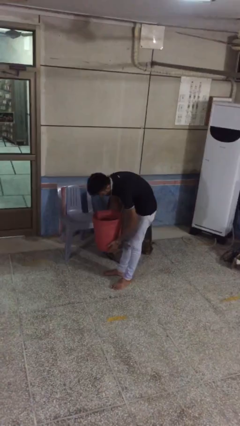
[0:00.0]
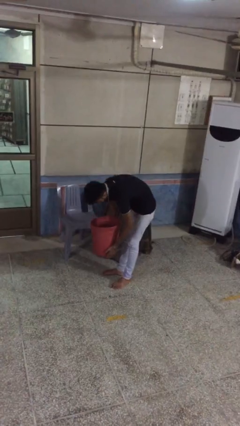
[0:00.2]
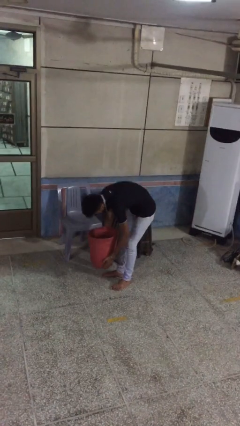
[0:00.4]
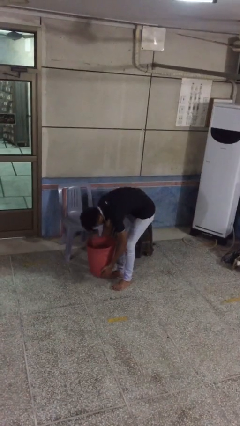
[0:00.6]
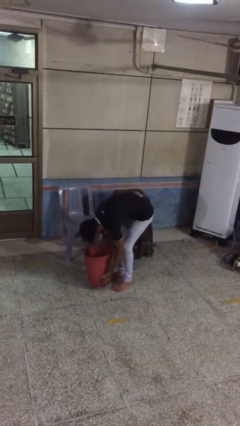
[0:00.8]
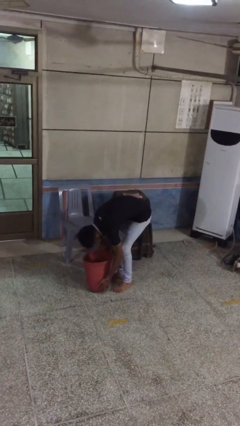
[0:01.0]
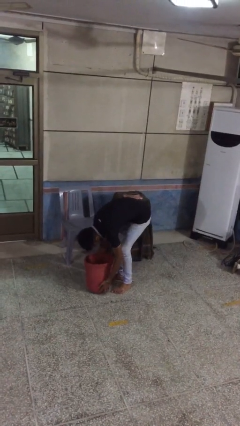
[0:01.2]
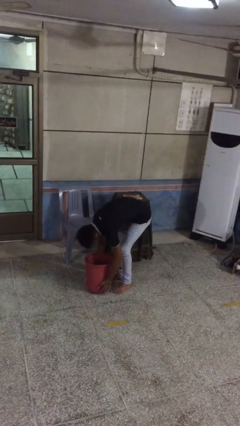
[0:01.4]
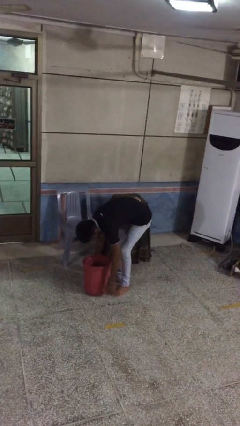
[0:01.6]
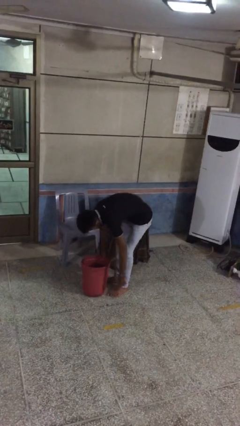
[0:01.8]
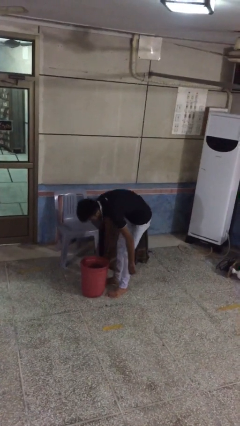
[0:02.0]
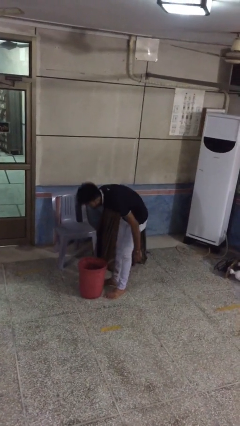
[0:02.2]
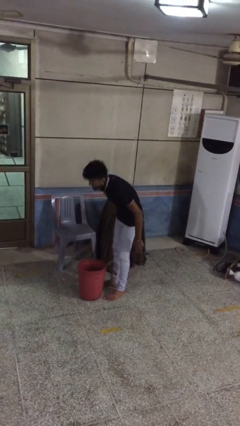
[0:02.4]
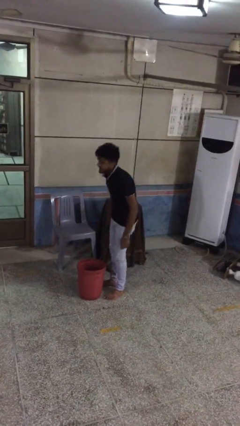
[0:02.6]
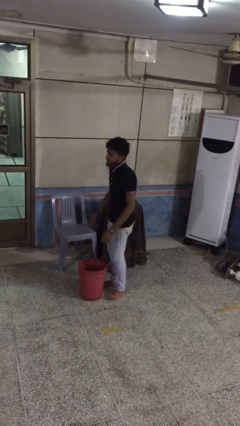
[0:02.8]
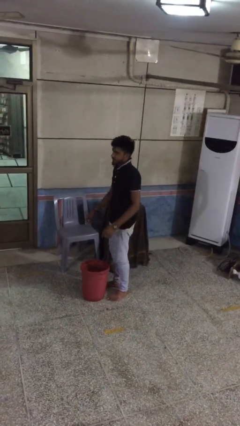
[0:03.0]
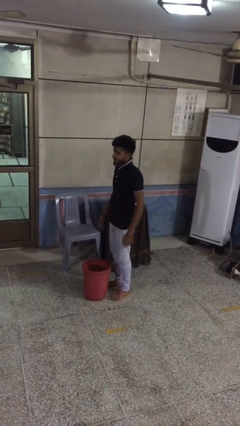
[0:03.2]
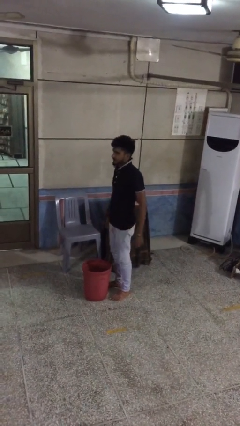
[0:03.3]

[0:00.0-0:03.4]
person puts down object on floor

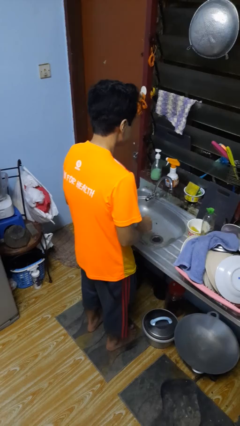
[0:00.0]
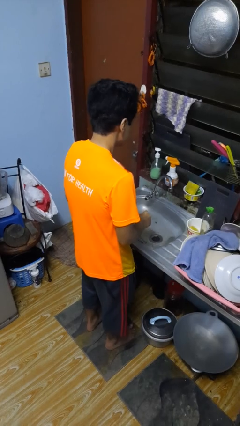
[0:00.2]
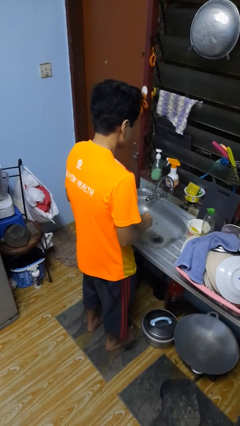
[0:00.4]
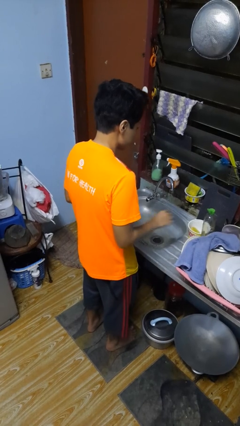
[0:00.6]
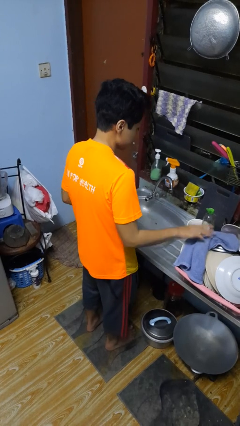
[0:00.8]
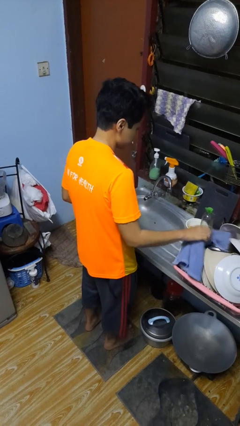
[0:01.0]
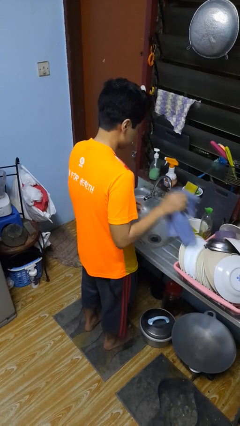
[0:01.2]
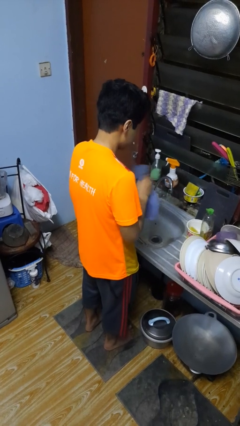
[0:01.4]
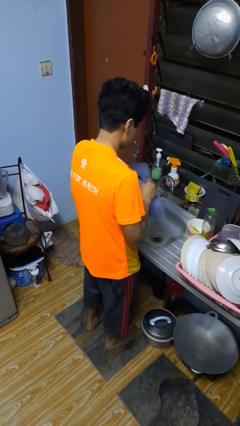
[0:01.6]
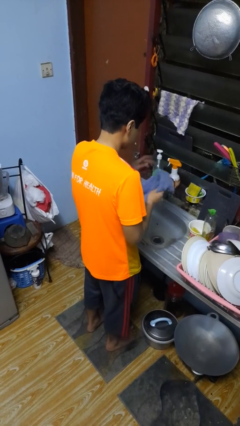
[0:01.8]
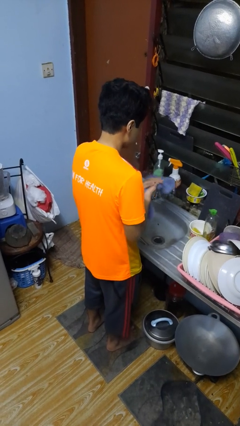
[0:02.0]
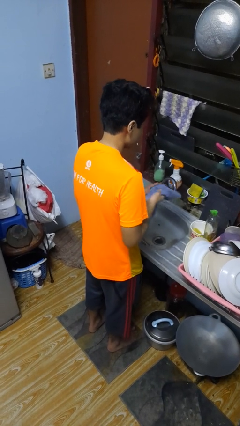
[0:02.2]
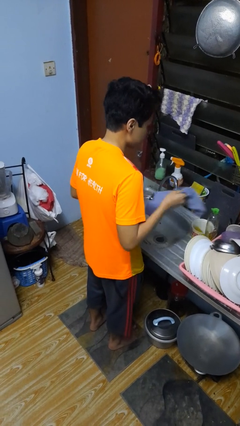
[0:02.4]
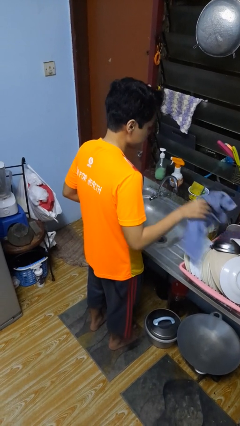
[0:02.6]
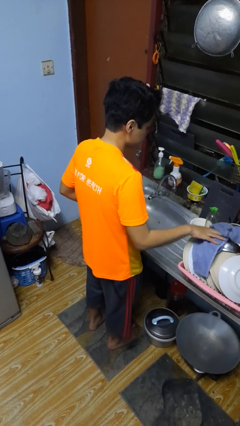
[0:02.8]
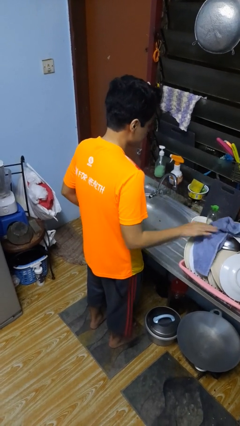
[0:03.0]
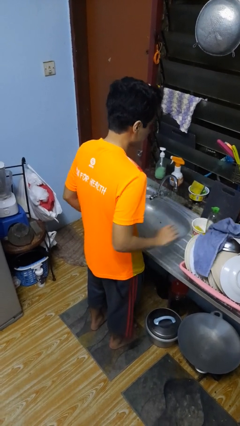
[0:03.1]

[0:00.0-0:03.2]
person dries hands with towel

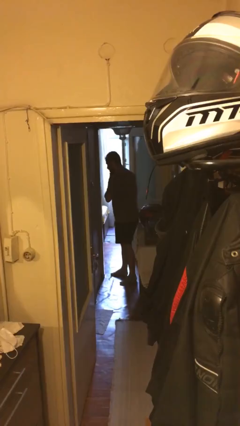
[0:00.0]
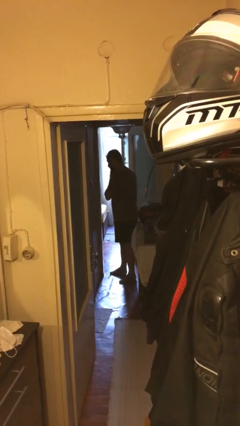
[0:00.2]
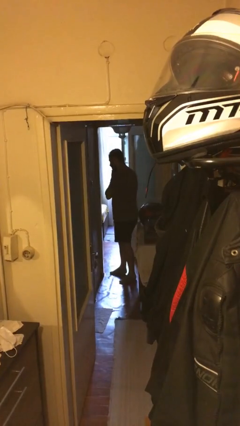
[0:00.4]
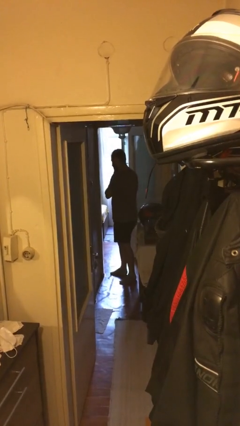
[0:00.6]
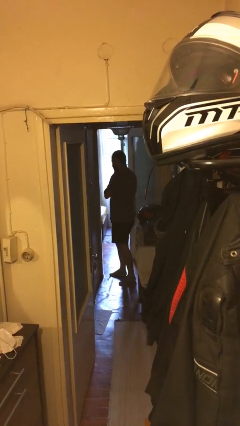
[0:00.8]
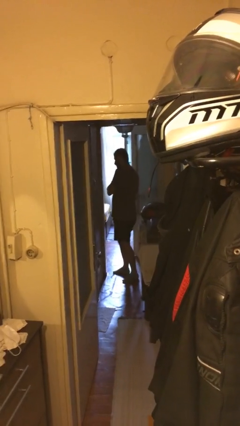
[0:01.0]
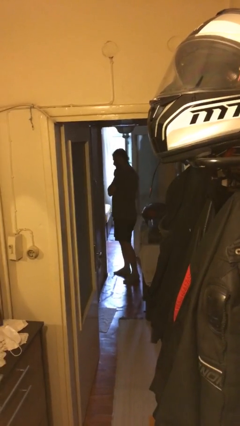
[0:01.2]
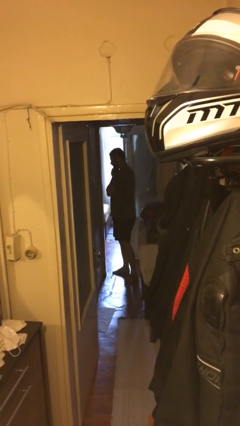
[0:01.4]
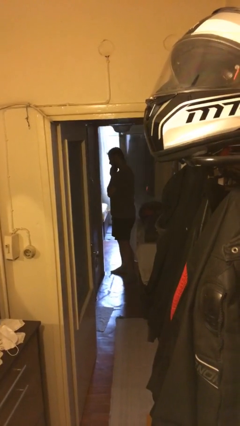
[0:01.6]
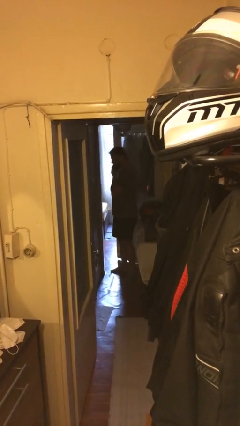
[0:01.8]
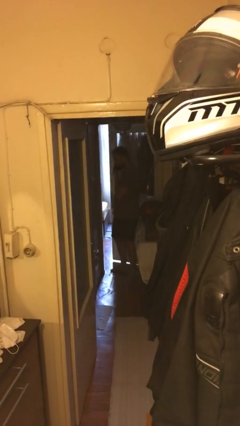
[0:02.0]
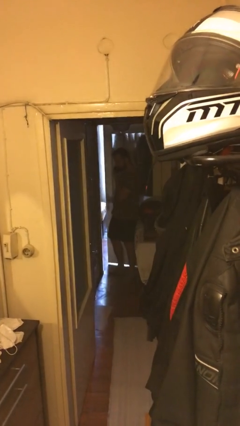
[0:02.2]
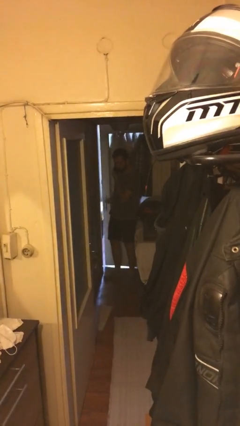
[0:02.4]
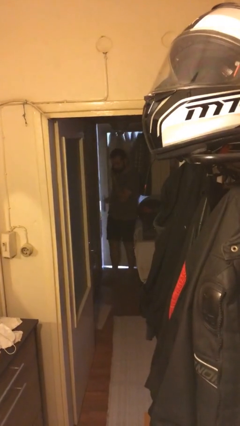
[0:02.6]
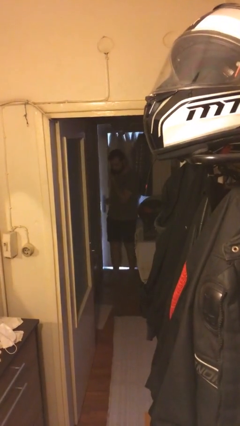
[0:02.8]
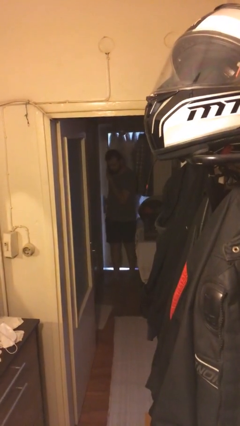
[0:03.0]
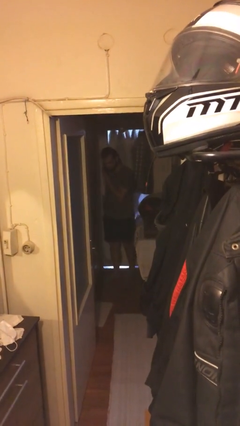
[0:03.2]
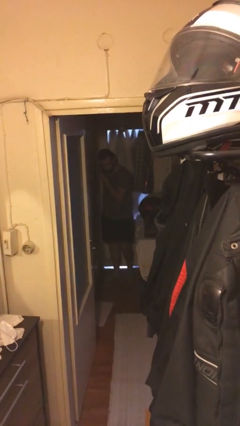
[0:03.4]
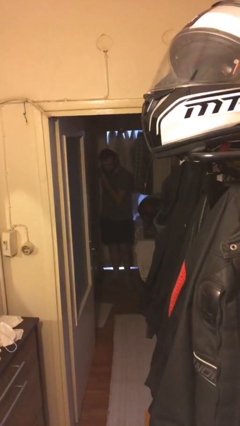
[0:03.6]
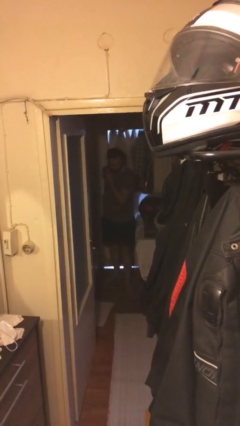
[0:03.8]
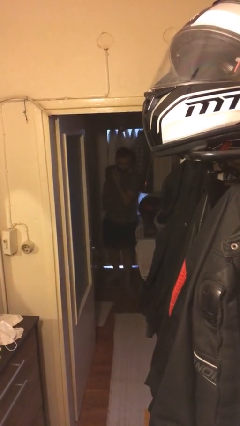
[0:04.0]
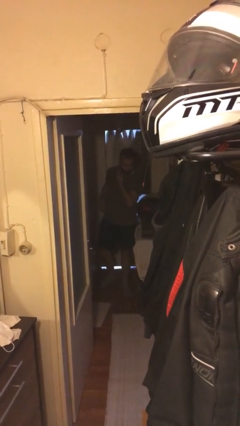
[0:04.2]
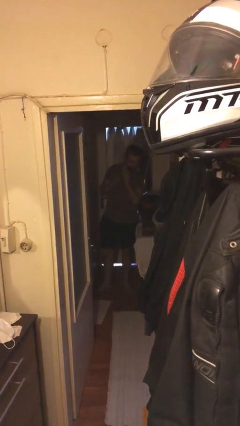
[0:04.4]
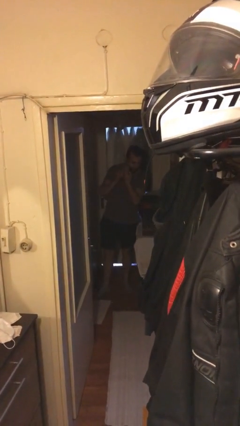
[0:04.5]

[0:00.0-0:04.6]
person closes facility door

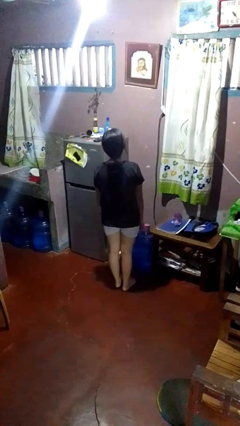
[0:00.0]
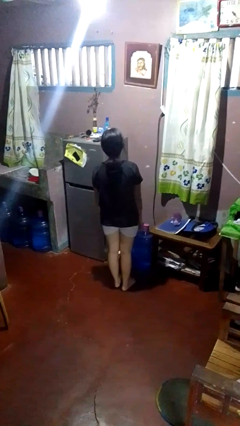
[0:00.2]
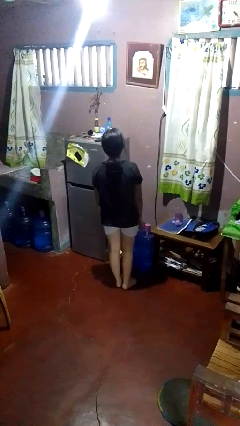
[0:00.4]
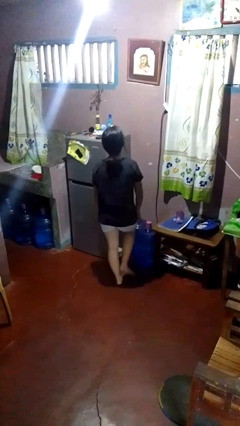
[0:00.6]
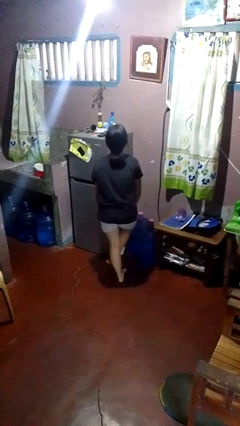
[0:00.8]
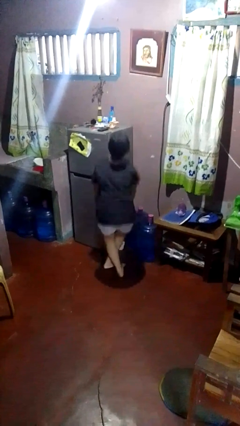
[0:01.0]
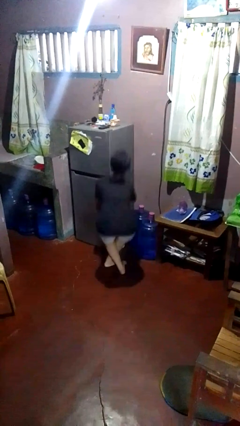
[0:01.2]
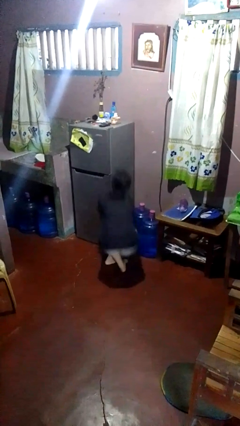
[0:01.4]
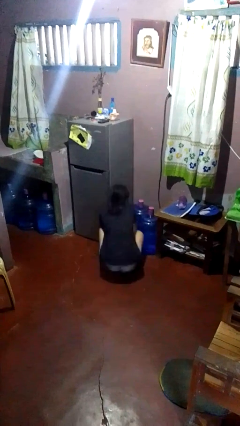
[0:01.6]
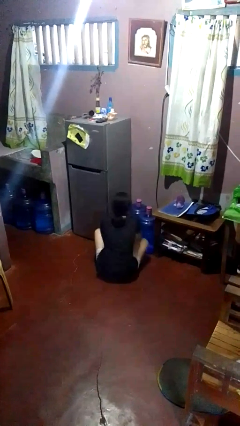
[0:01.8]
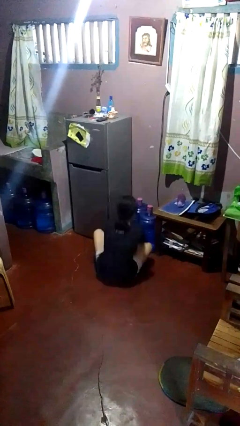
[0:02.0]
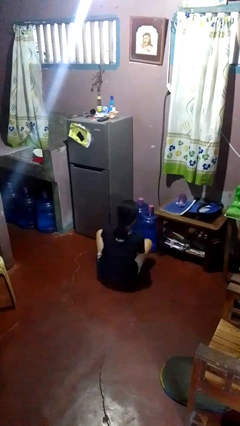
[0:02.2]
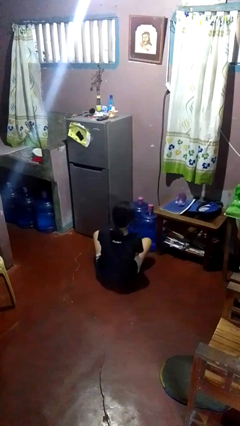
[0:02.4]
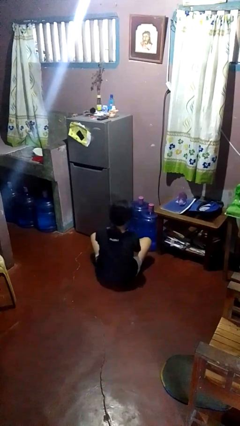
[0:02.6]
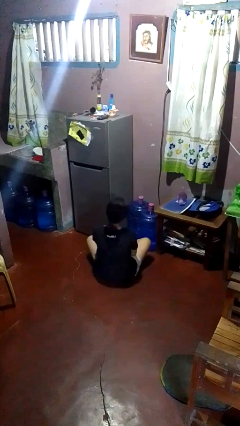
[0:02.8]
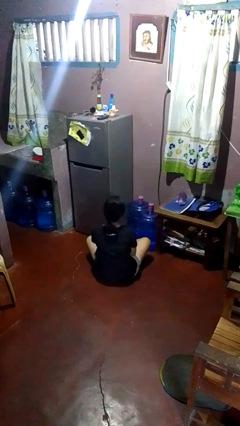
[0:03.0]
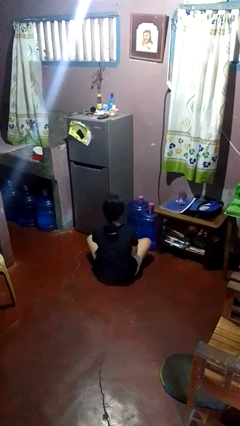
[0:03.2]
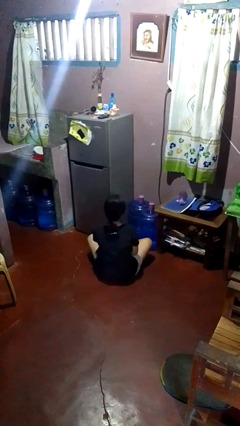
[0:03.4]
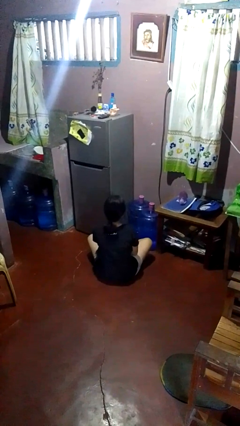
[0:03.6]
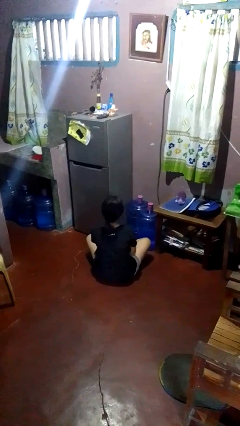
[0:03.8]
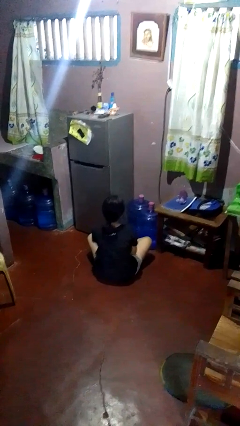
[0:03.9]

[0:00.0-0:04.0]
person sits crisscross

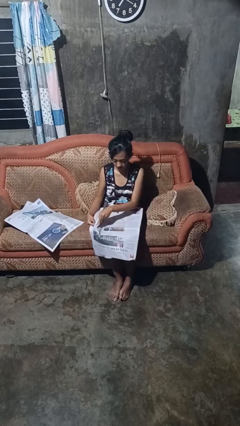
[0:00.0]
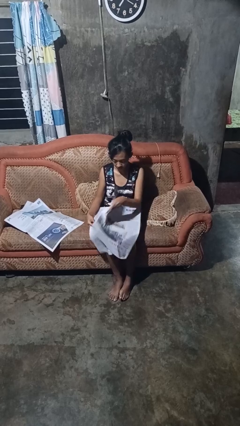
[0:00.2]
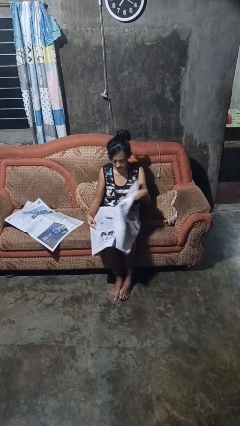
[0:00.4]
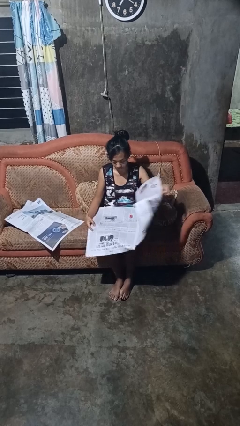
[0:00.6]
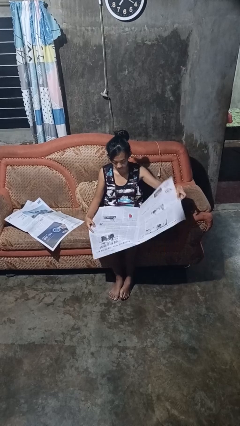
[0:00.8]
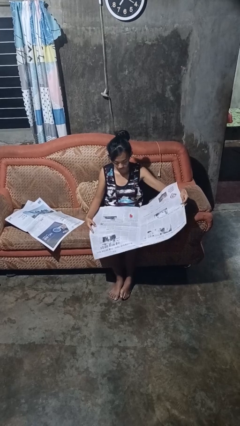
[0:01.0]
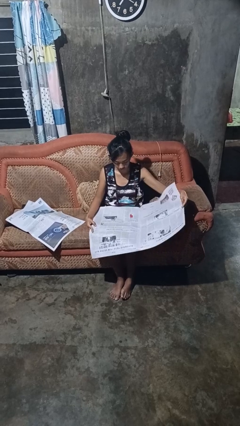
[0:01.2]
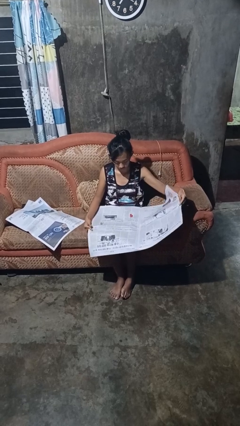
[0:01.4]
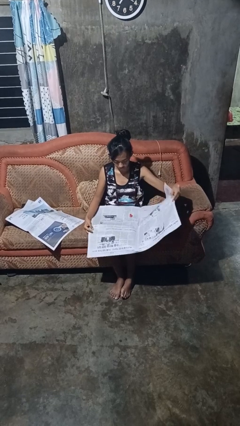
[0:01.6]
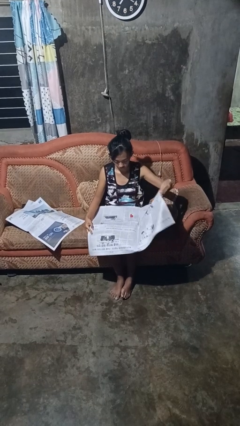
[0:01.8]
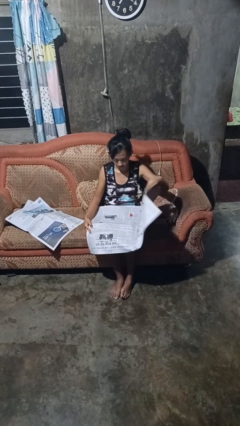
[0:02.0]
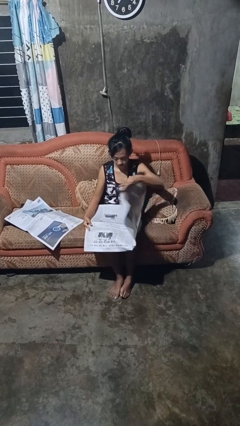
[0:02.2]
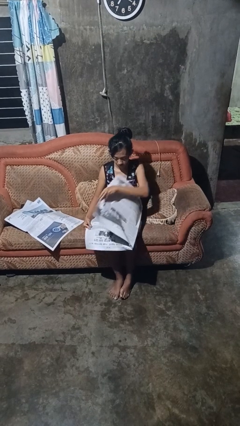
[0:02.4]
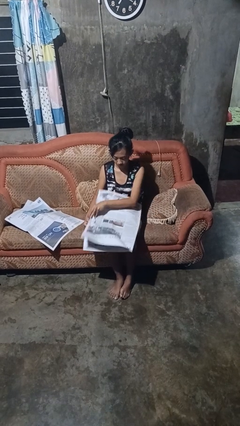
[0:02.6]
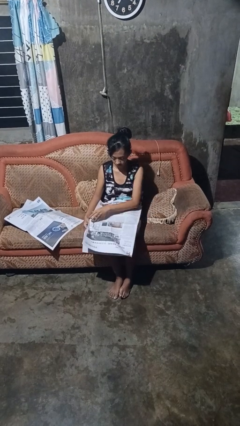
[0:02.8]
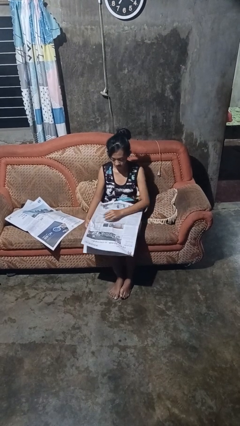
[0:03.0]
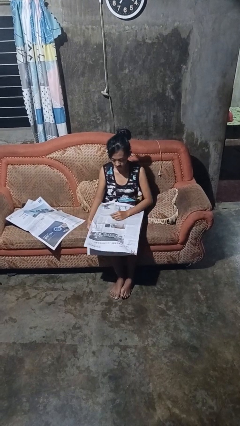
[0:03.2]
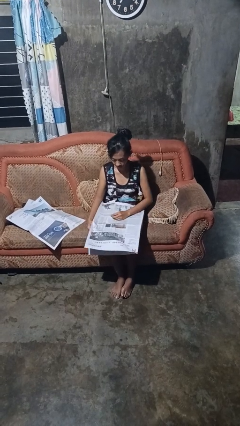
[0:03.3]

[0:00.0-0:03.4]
person reads newspaper
